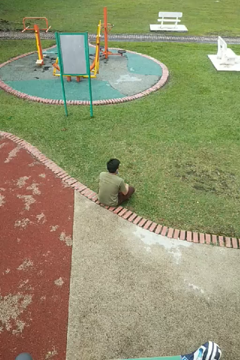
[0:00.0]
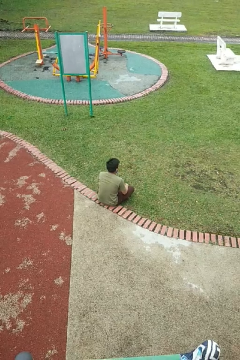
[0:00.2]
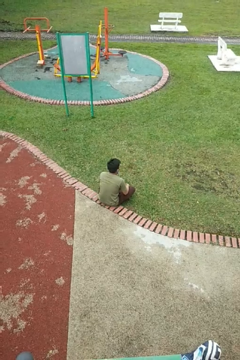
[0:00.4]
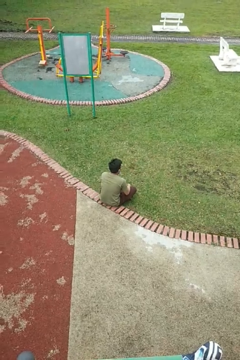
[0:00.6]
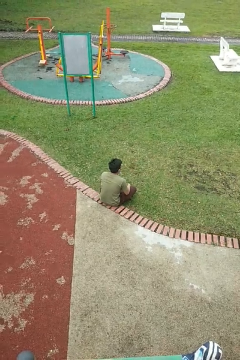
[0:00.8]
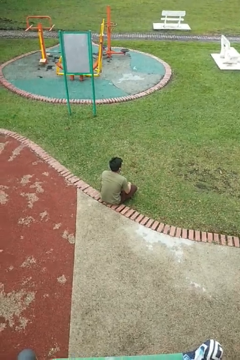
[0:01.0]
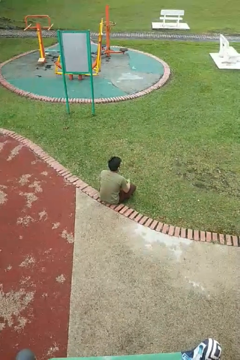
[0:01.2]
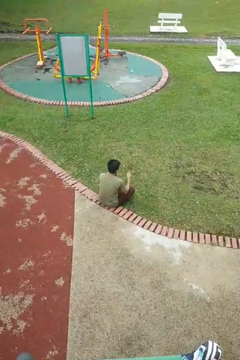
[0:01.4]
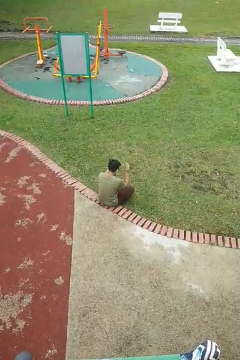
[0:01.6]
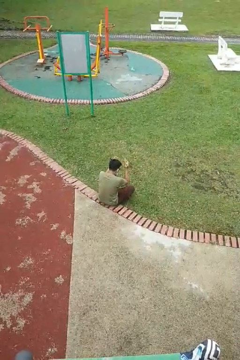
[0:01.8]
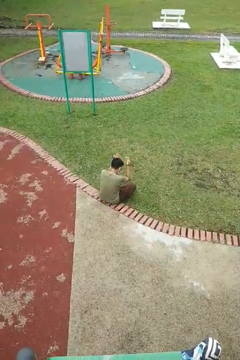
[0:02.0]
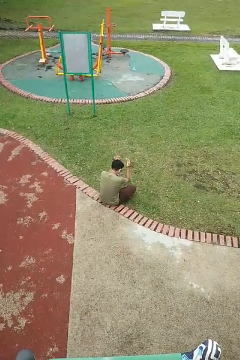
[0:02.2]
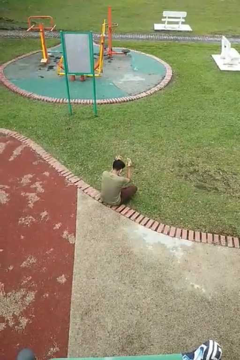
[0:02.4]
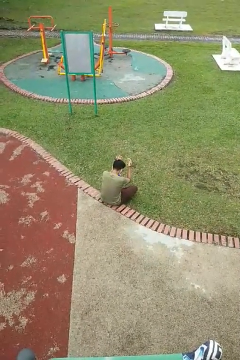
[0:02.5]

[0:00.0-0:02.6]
person prays

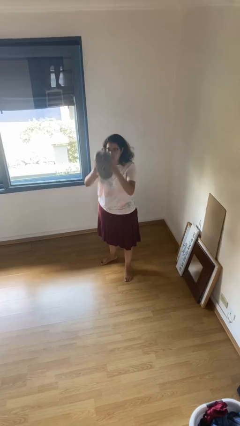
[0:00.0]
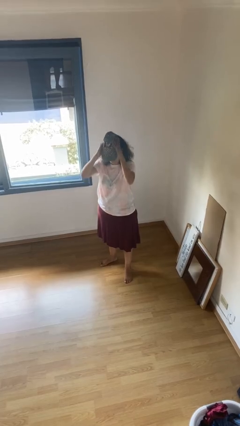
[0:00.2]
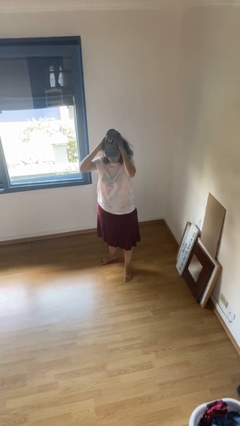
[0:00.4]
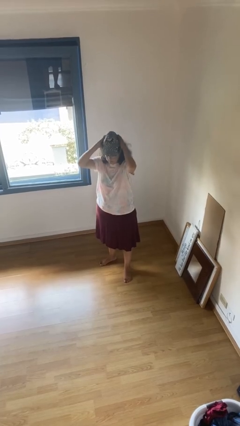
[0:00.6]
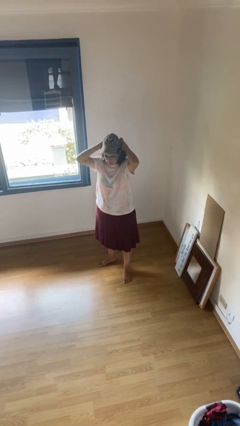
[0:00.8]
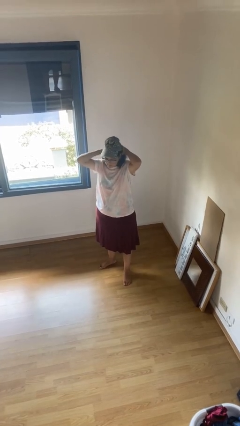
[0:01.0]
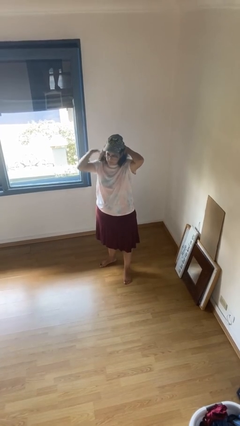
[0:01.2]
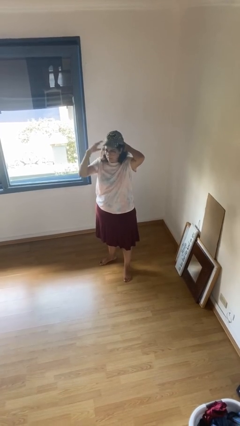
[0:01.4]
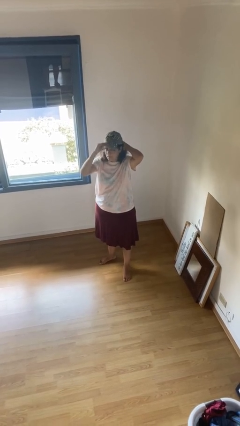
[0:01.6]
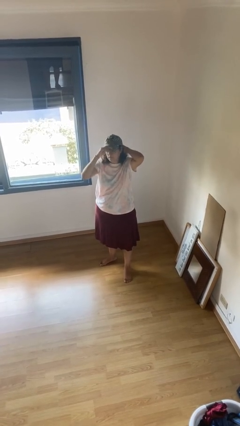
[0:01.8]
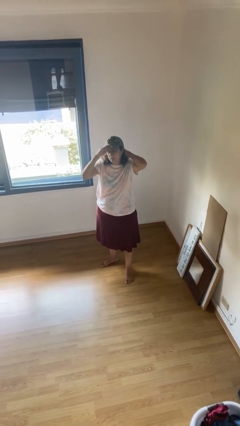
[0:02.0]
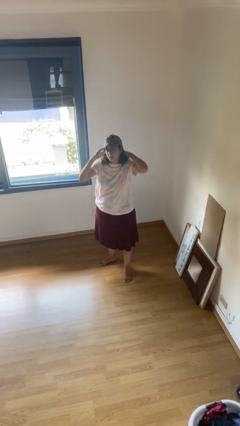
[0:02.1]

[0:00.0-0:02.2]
person puts on hat

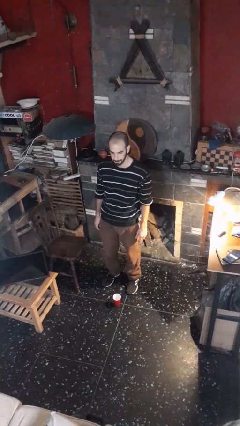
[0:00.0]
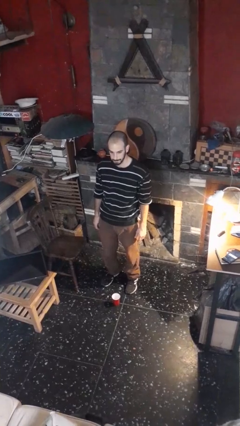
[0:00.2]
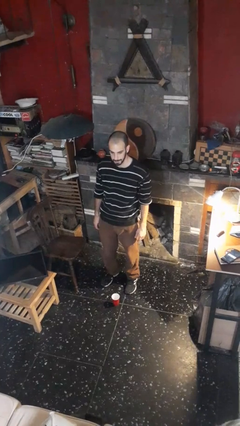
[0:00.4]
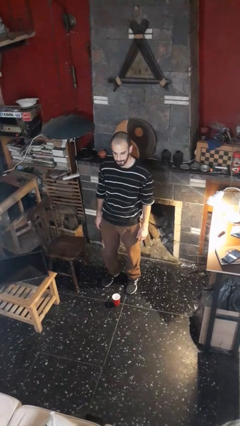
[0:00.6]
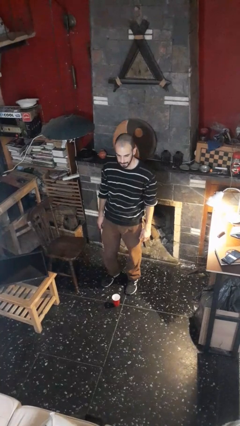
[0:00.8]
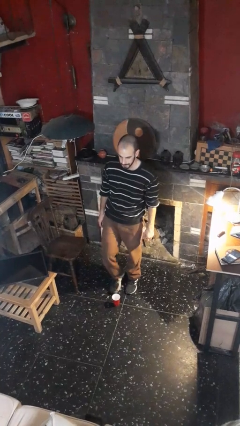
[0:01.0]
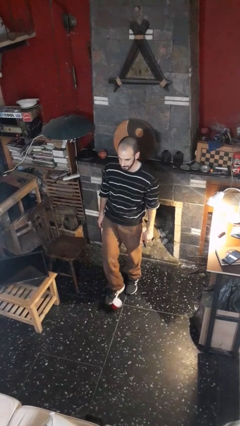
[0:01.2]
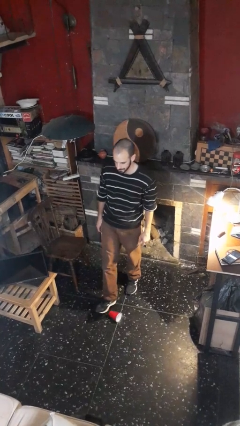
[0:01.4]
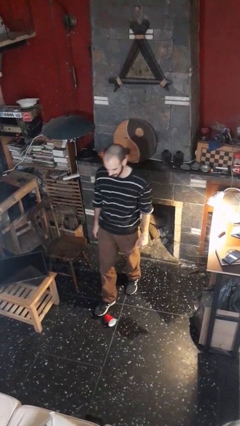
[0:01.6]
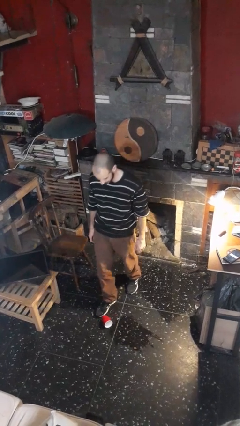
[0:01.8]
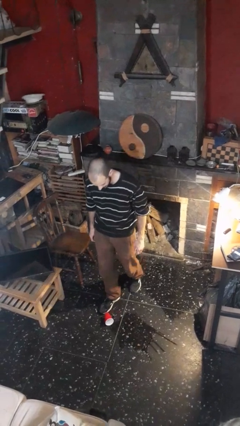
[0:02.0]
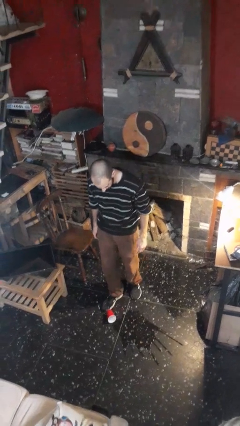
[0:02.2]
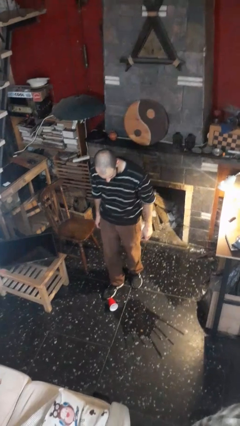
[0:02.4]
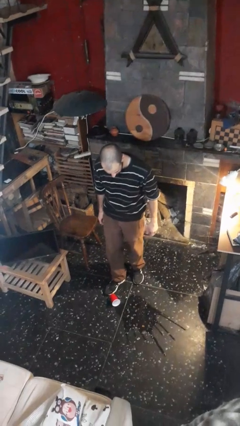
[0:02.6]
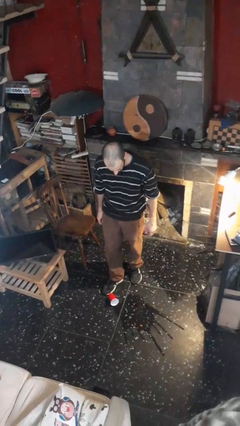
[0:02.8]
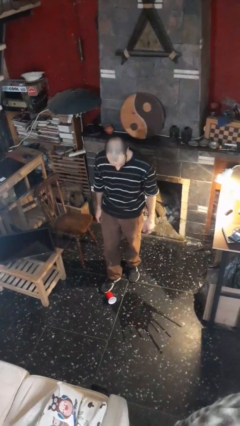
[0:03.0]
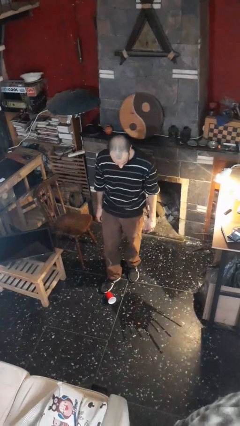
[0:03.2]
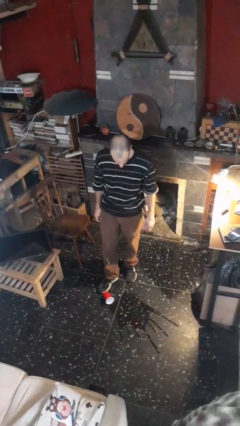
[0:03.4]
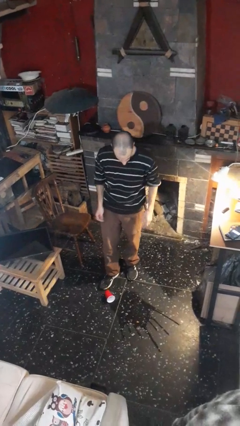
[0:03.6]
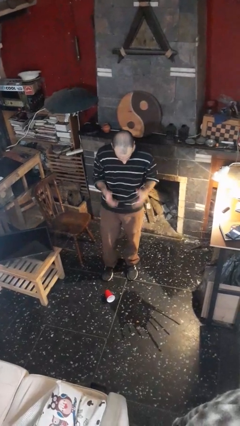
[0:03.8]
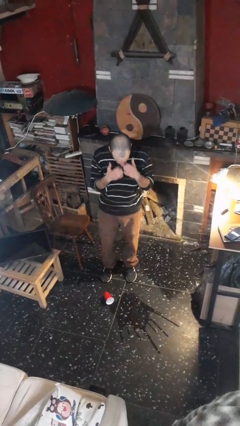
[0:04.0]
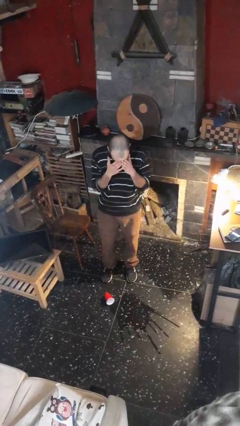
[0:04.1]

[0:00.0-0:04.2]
person spills on floor

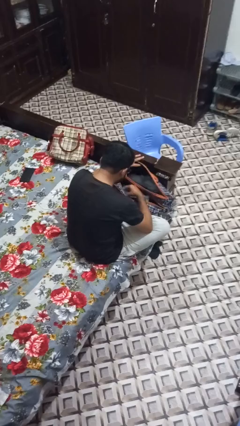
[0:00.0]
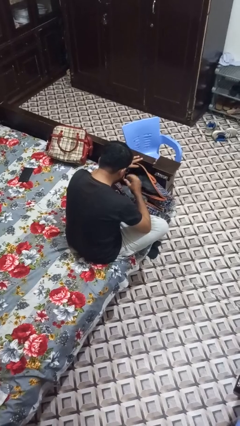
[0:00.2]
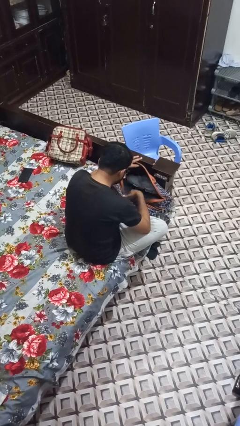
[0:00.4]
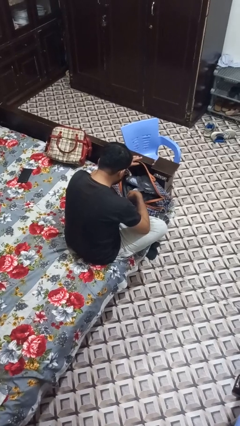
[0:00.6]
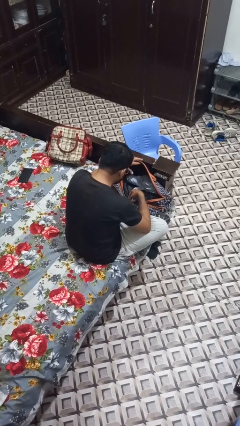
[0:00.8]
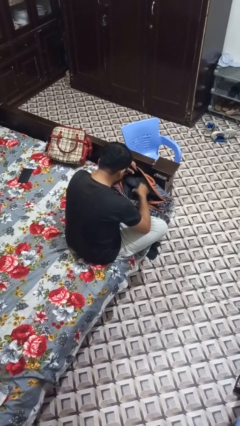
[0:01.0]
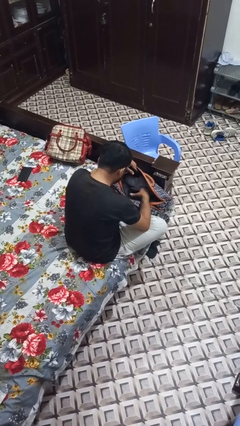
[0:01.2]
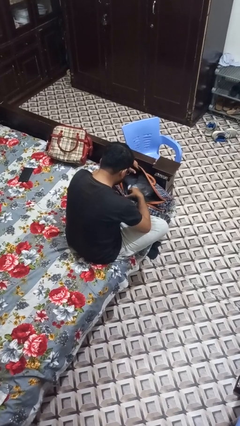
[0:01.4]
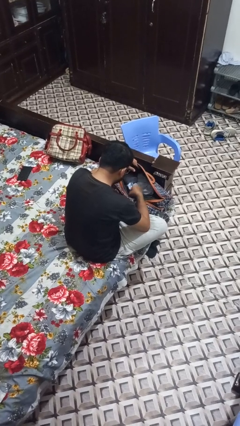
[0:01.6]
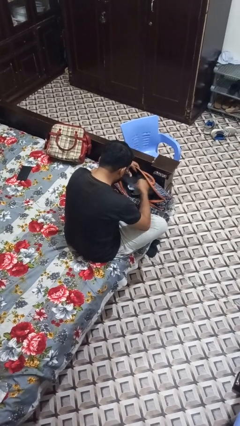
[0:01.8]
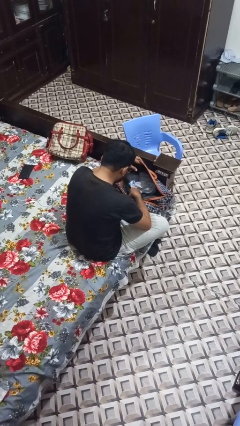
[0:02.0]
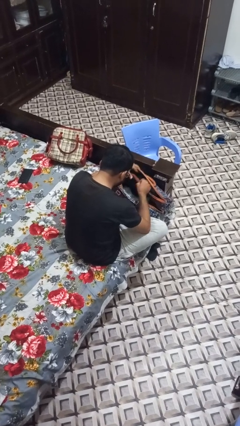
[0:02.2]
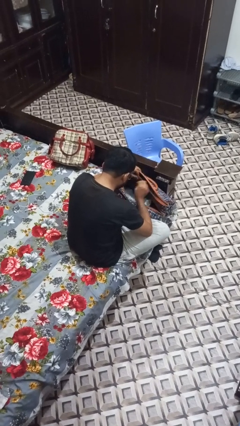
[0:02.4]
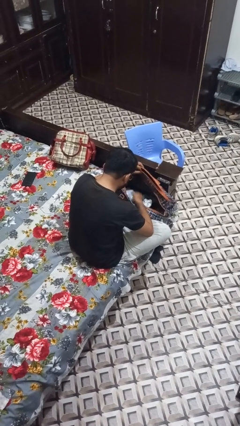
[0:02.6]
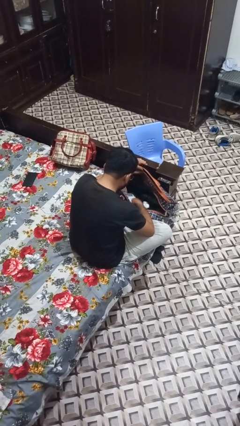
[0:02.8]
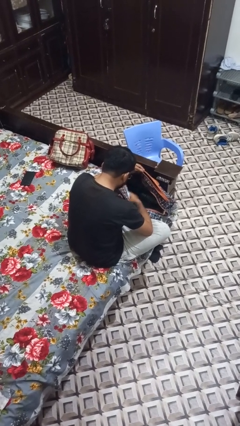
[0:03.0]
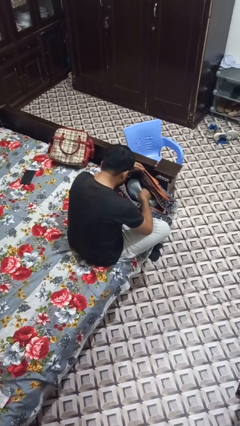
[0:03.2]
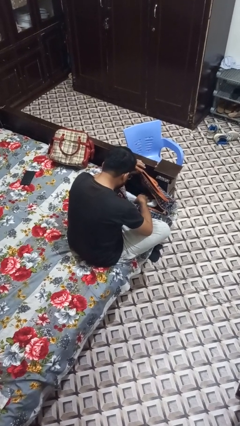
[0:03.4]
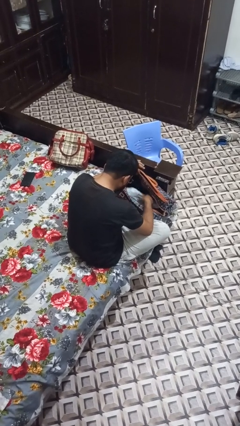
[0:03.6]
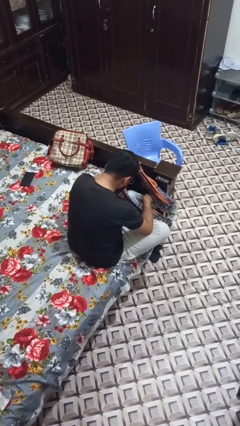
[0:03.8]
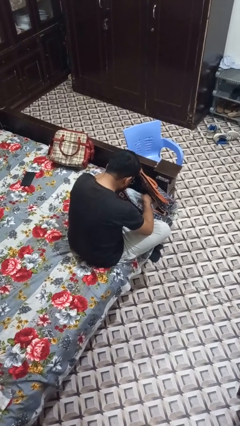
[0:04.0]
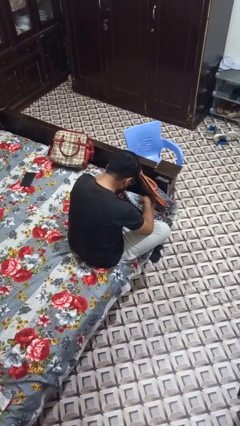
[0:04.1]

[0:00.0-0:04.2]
person searches in backpack

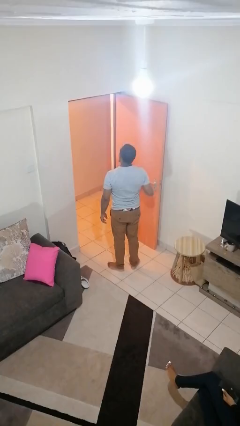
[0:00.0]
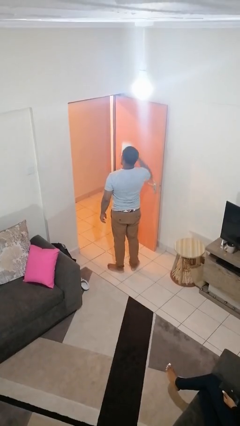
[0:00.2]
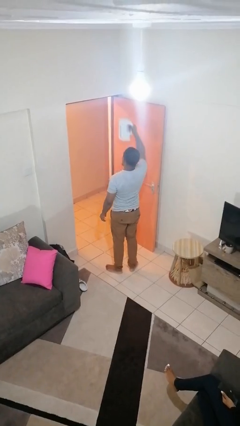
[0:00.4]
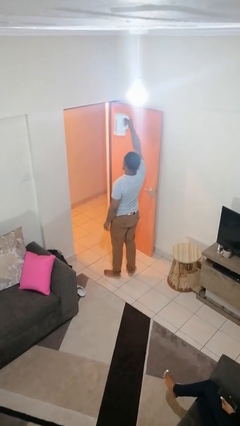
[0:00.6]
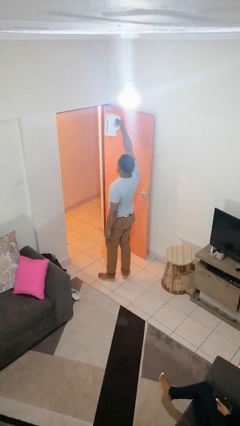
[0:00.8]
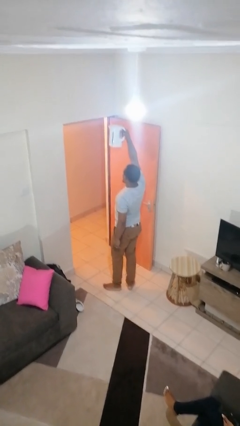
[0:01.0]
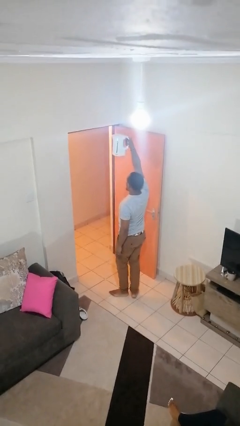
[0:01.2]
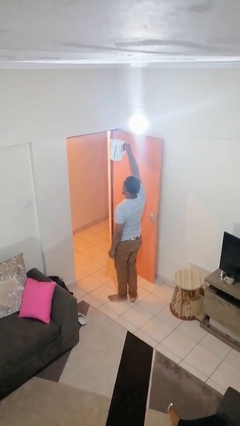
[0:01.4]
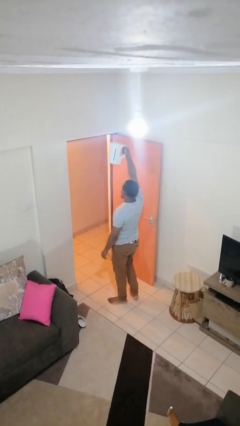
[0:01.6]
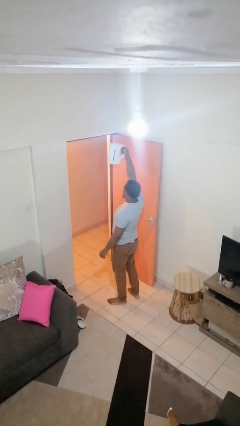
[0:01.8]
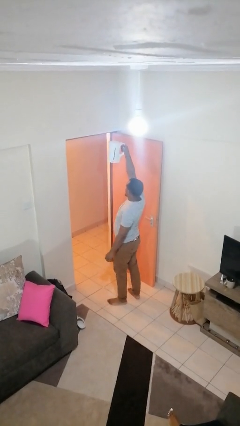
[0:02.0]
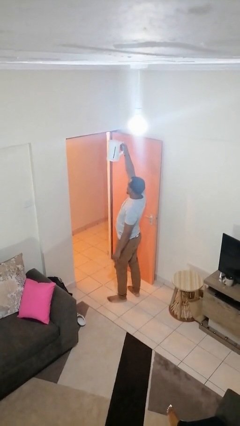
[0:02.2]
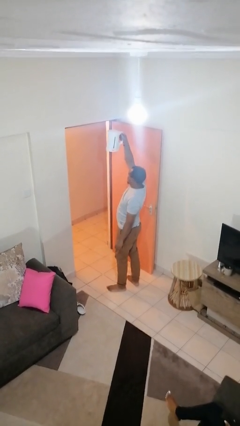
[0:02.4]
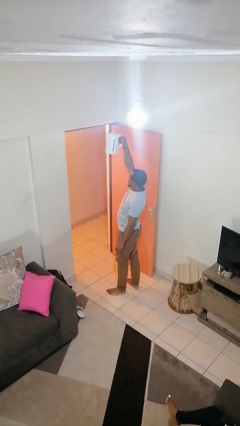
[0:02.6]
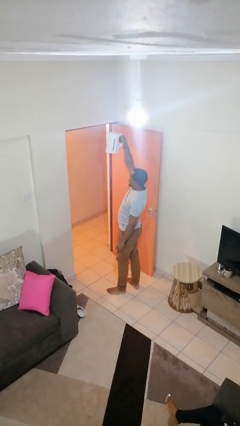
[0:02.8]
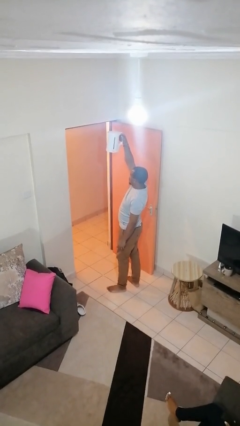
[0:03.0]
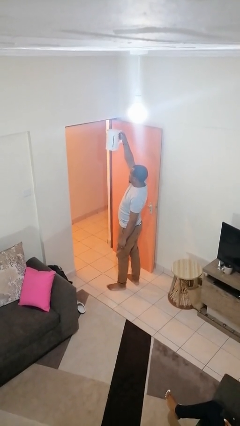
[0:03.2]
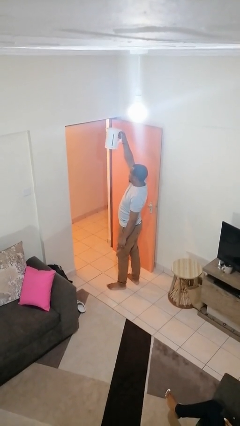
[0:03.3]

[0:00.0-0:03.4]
person holds object above head

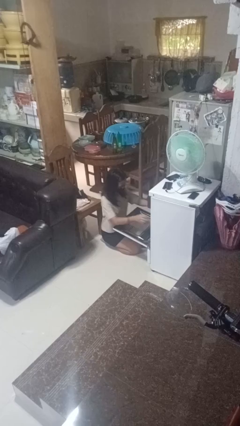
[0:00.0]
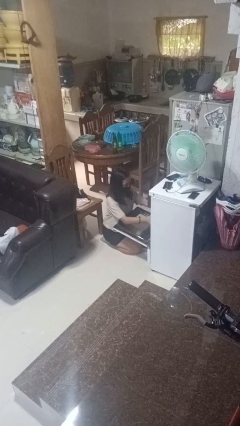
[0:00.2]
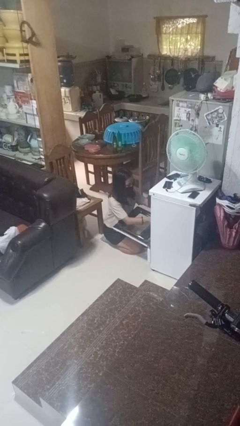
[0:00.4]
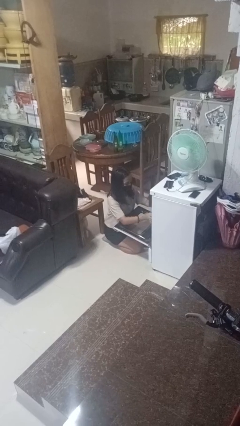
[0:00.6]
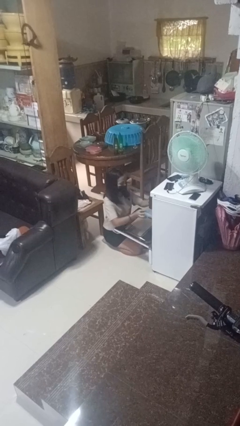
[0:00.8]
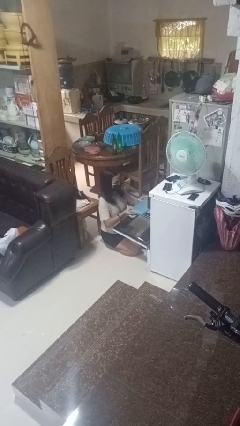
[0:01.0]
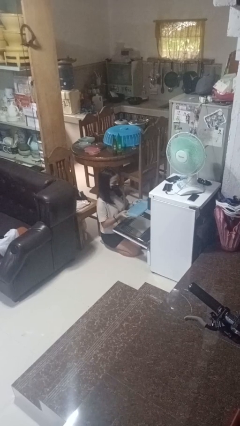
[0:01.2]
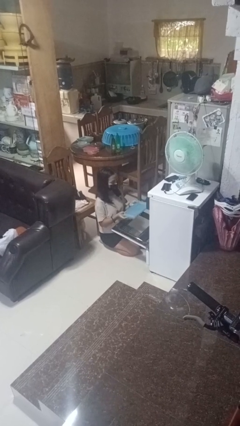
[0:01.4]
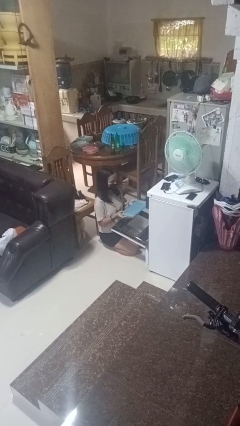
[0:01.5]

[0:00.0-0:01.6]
person takes object from oven
